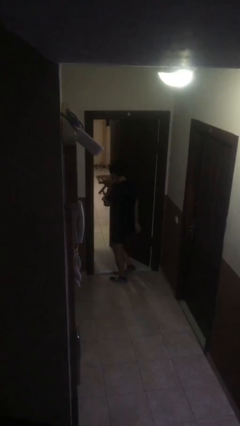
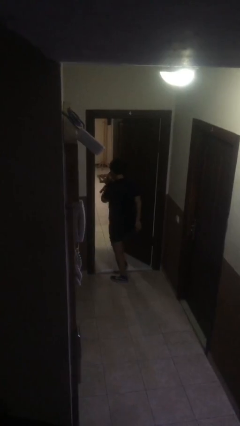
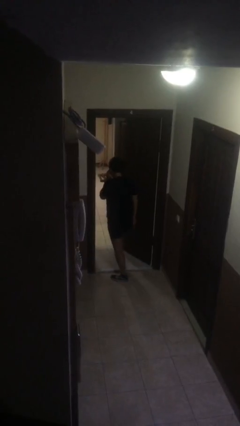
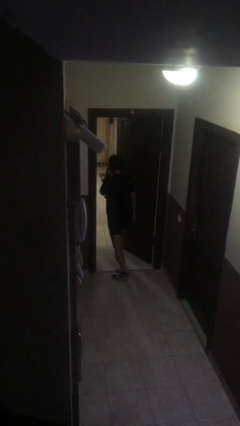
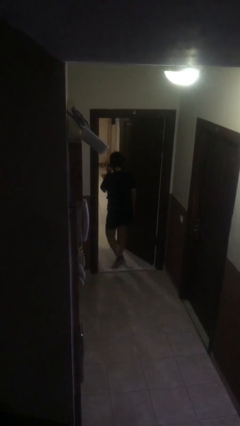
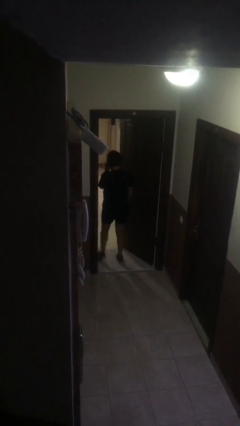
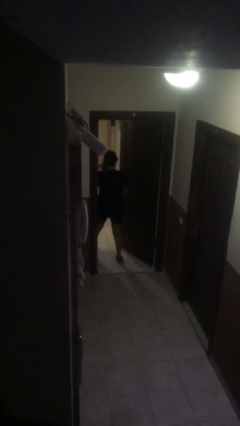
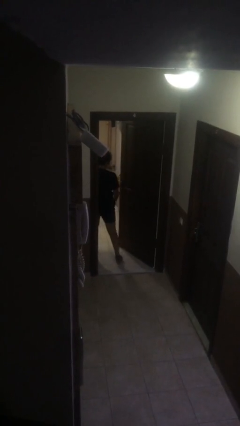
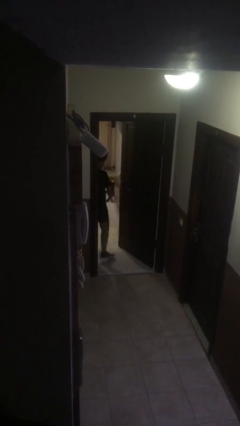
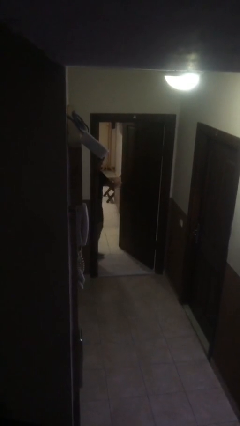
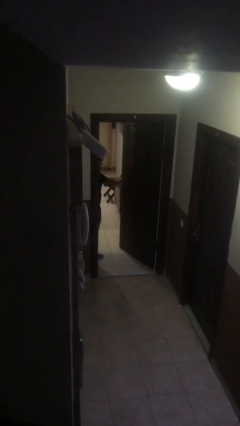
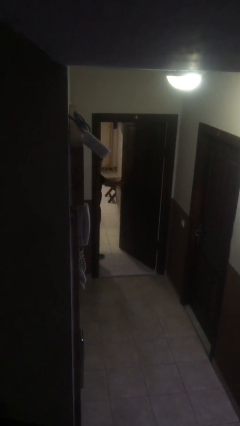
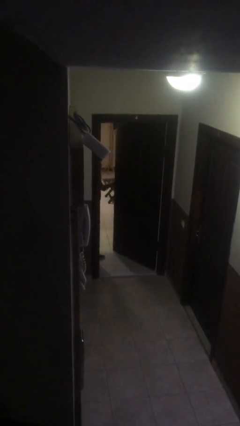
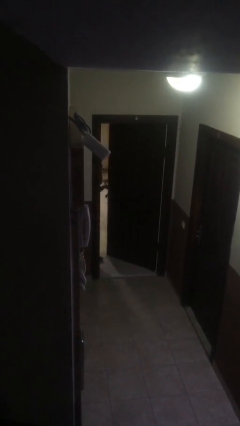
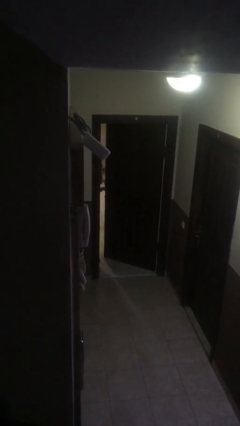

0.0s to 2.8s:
person exits scene through structure

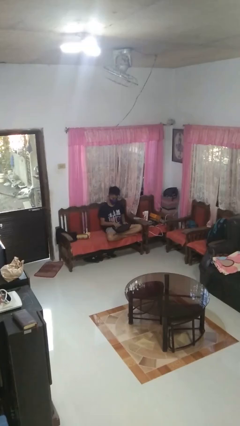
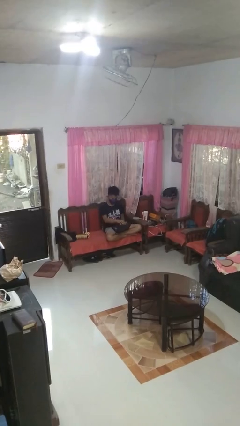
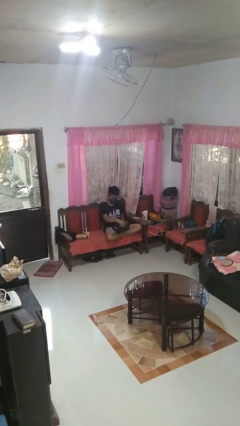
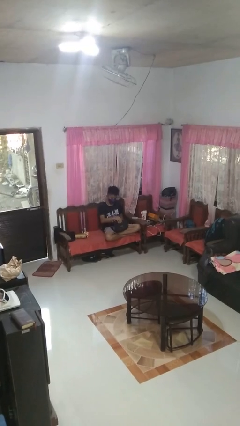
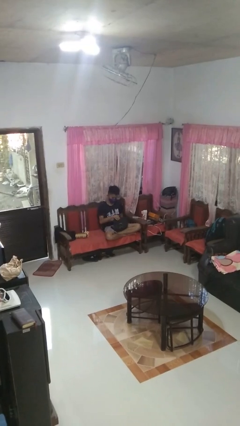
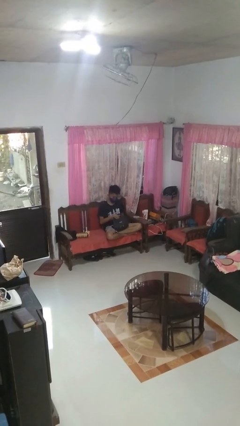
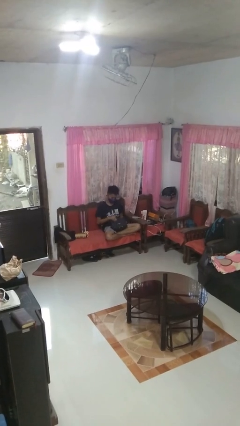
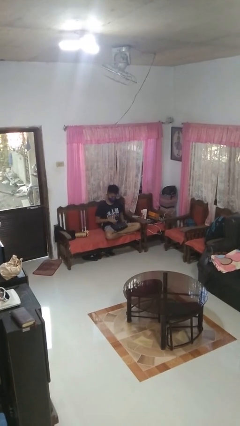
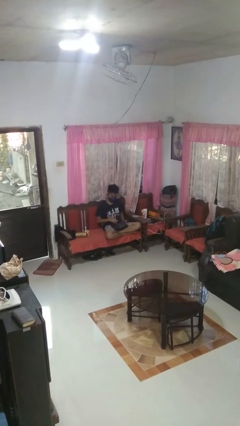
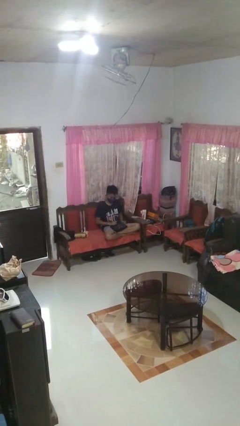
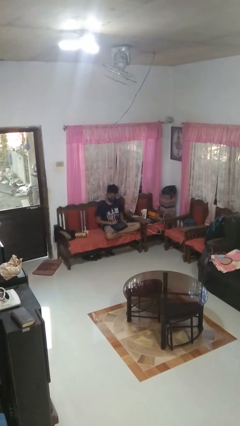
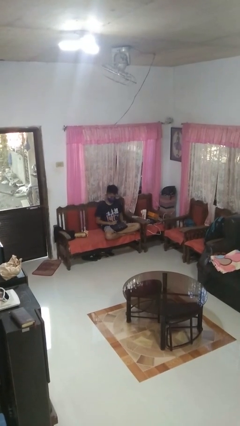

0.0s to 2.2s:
person closes laptop

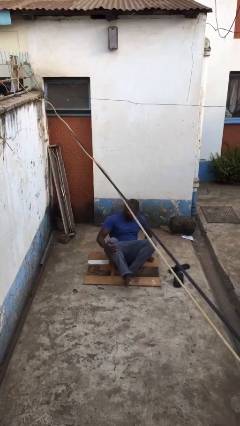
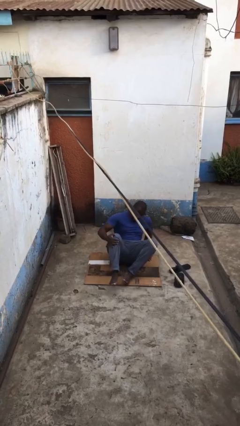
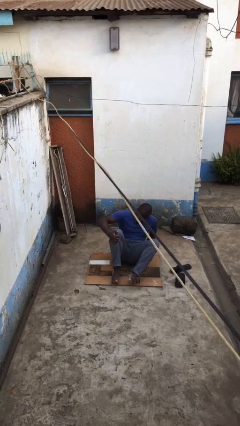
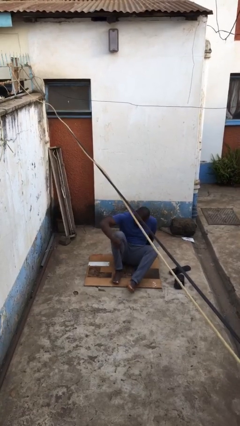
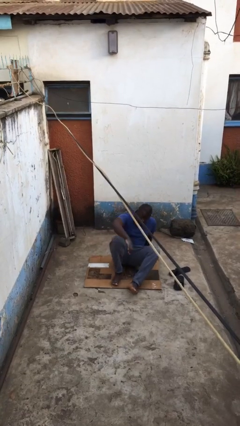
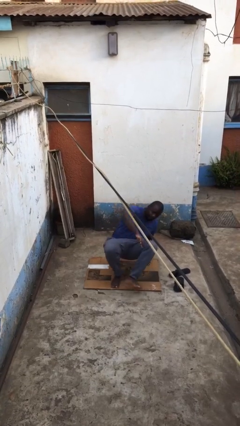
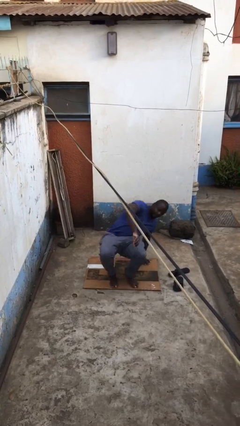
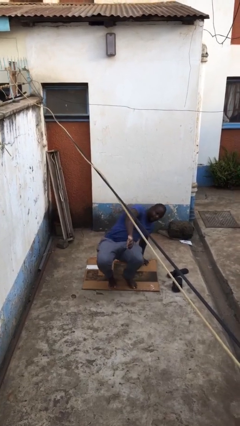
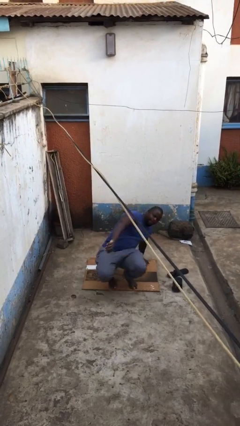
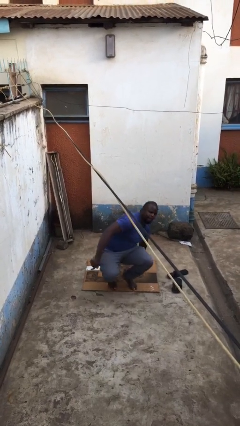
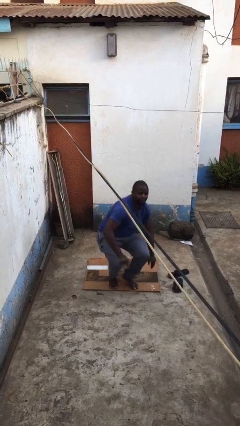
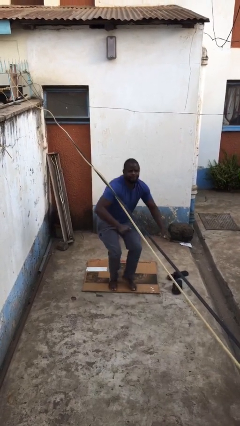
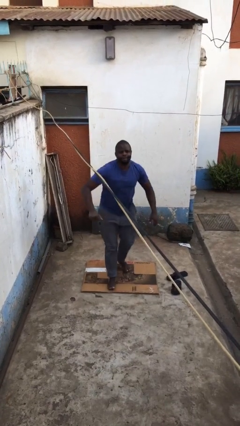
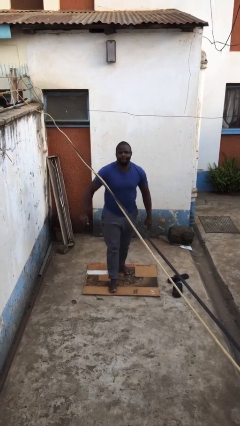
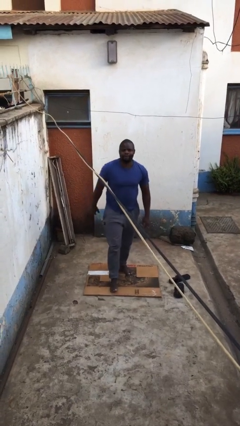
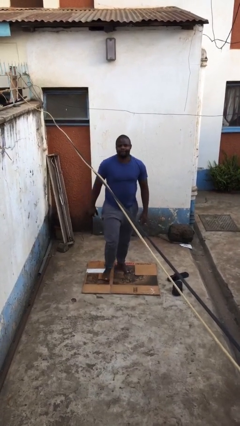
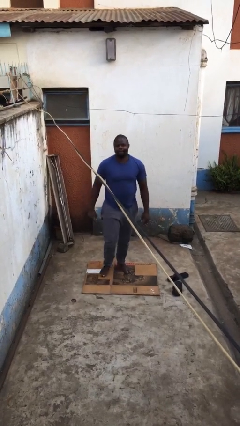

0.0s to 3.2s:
person stands up from floor

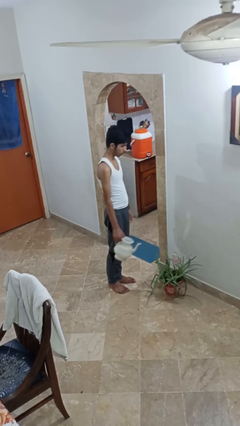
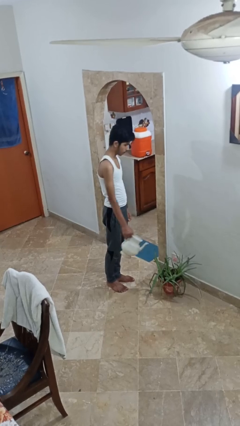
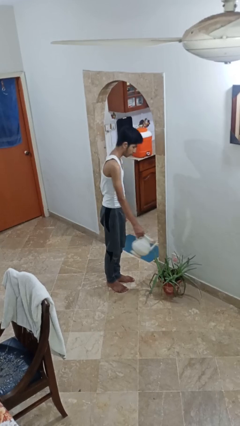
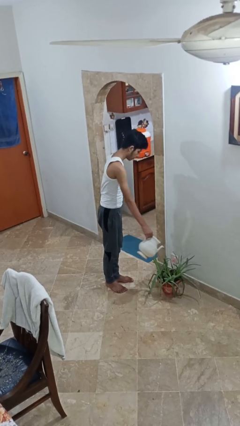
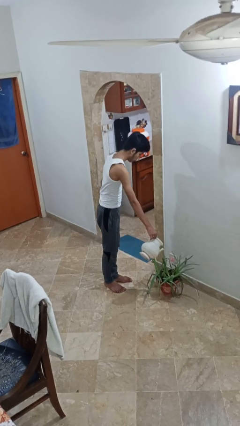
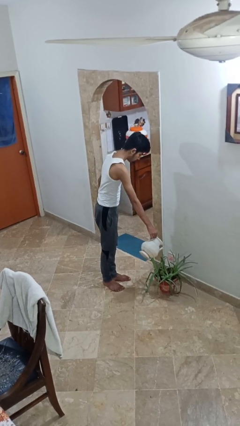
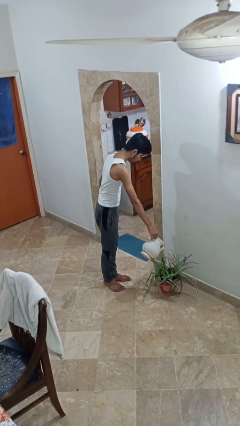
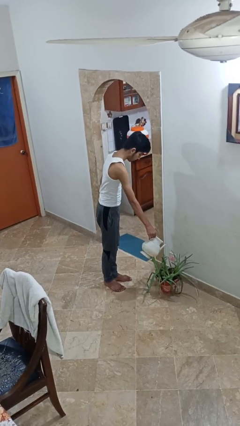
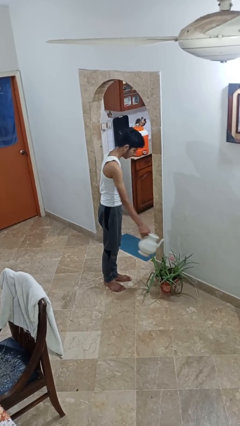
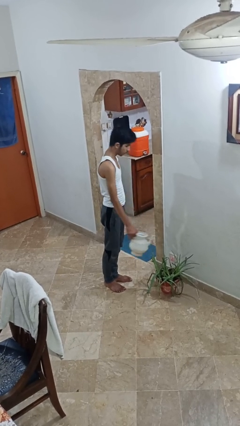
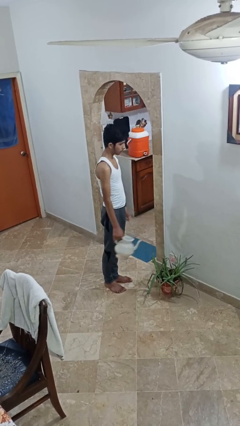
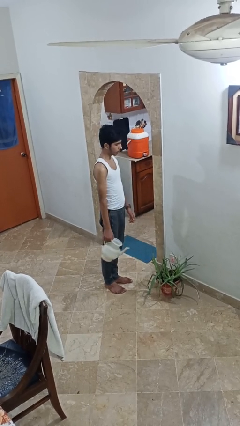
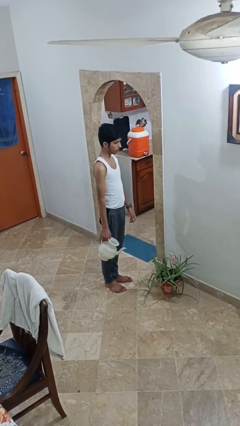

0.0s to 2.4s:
person waters houseplant

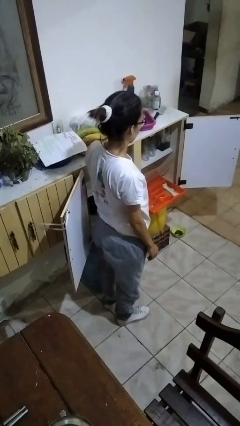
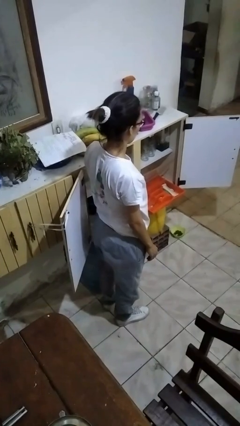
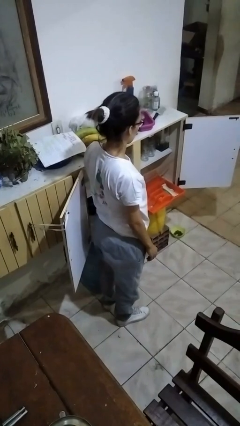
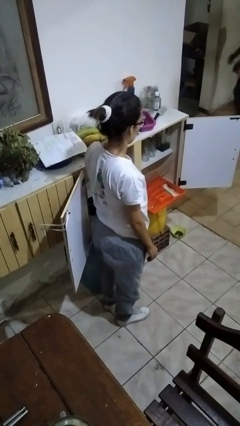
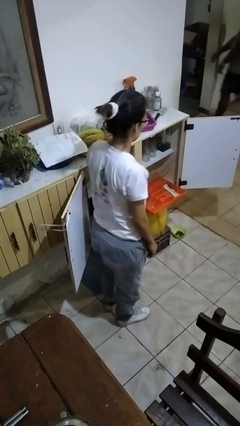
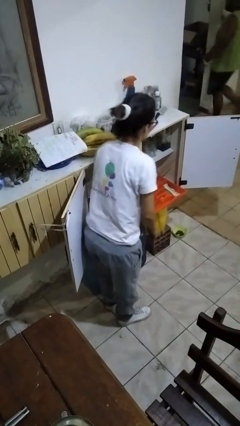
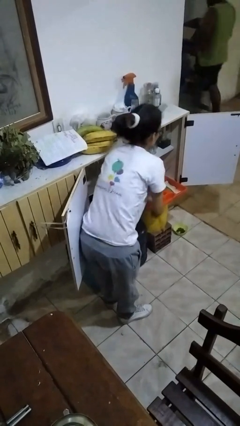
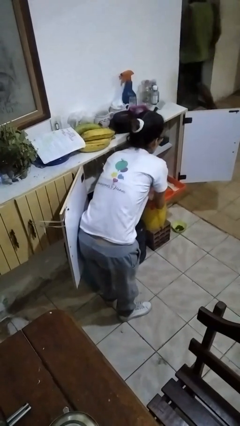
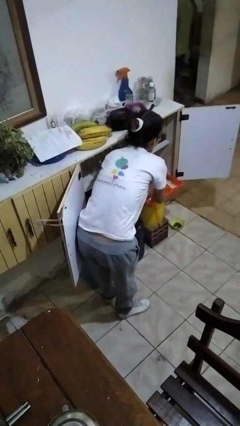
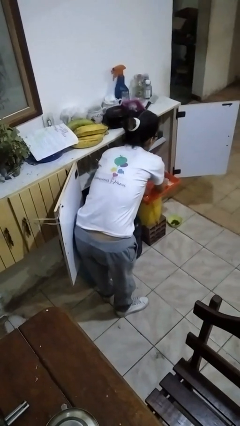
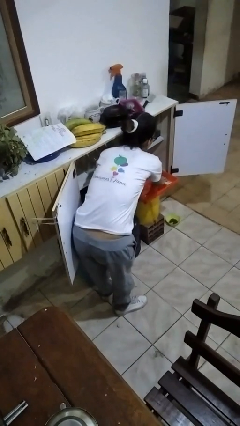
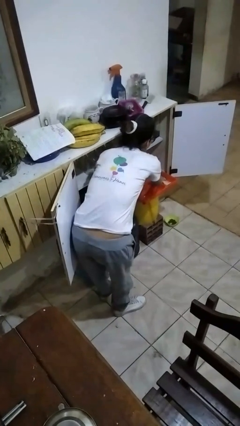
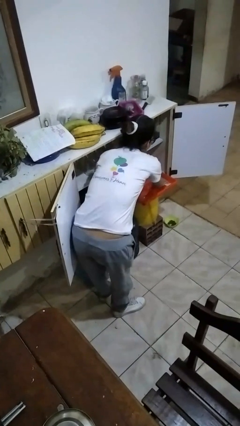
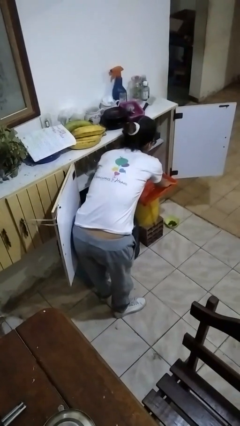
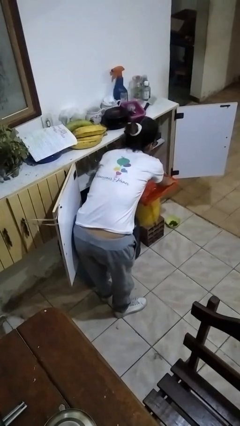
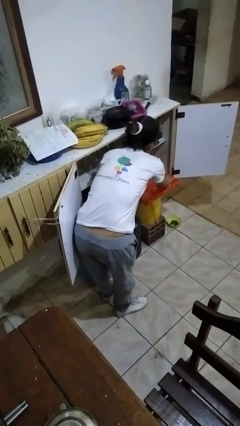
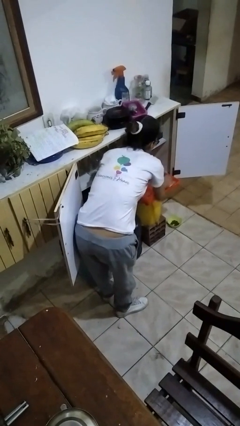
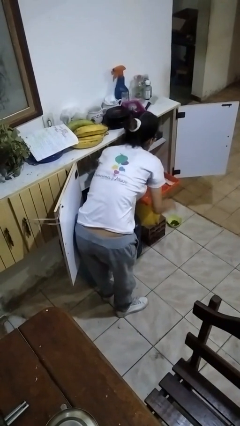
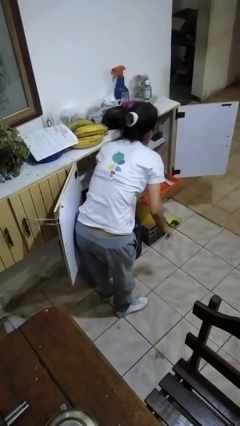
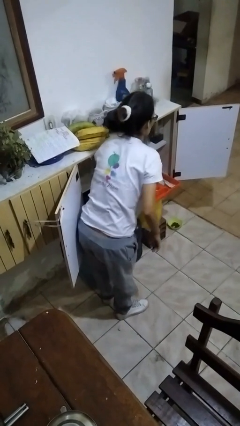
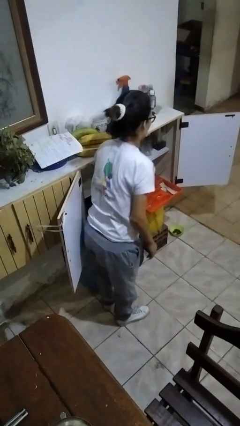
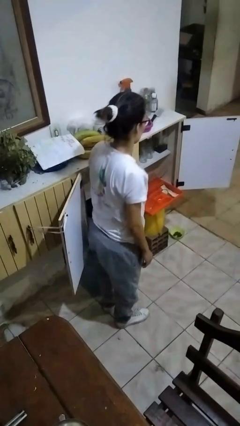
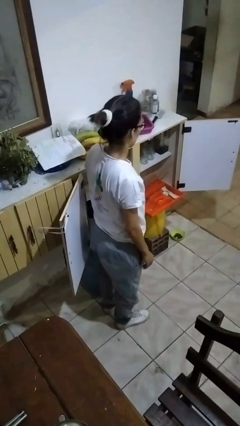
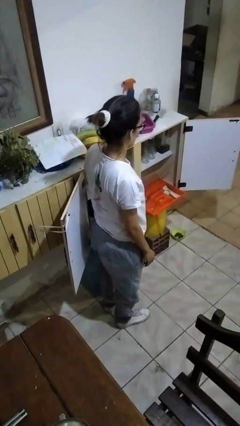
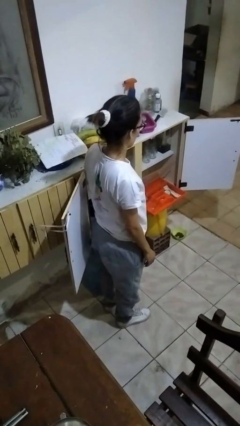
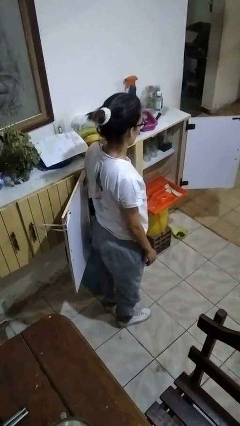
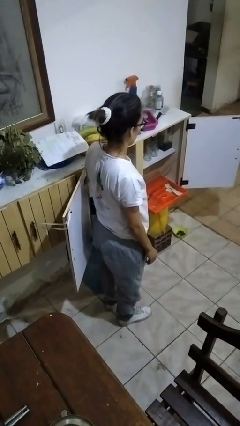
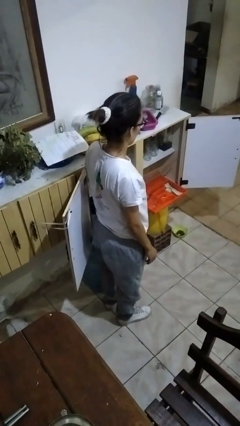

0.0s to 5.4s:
person searches in kitchen drawer

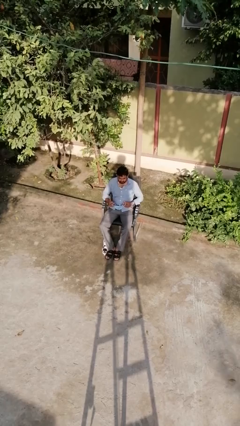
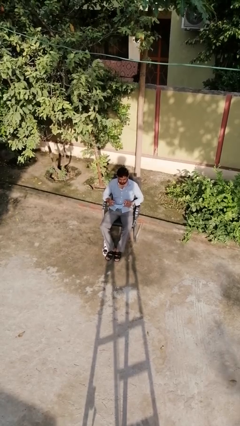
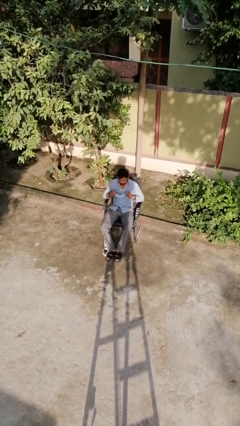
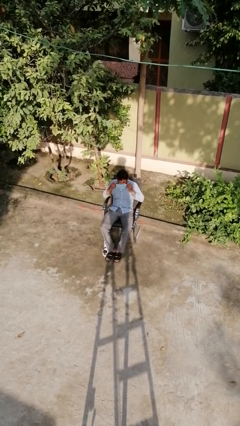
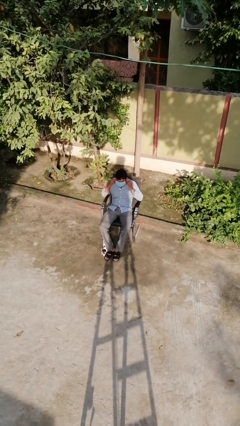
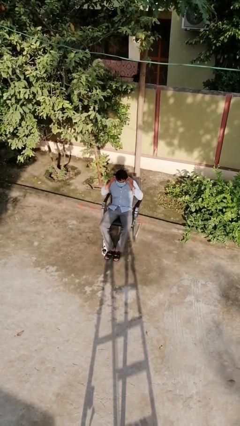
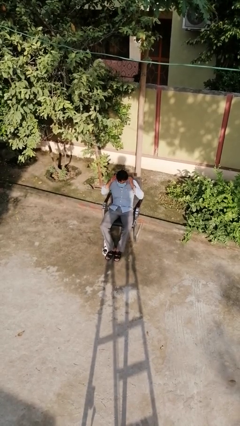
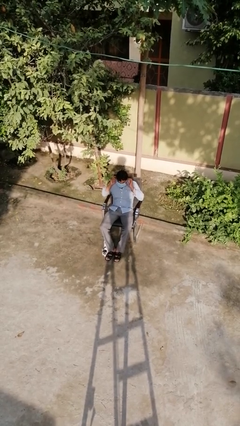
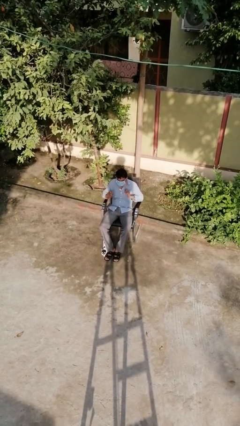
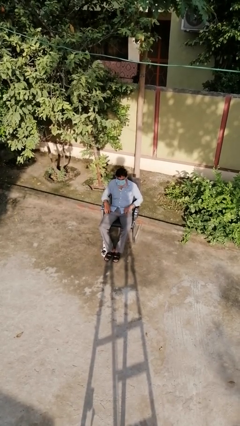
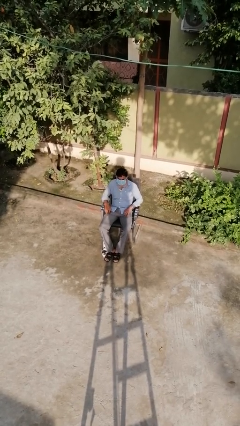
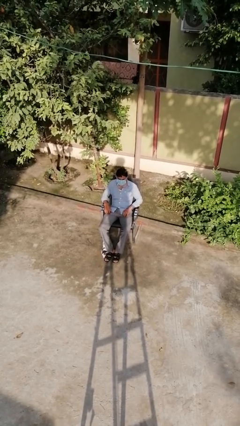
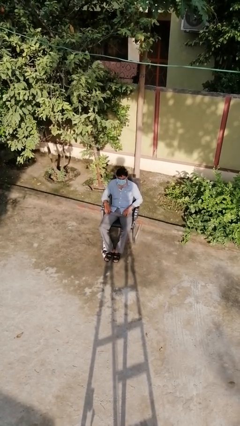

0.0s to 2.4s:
person puts on facemask
